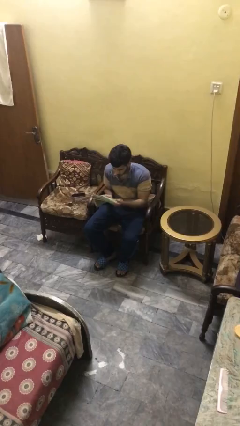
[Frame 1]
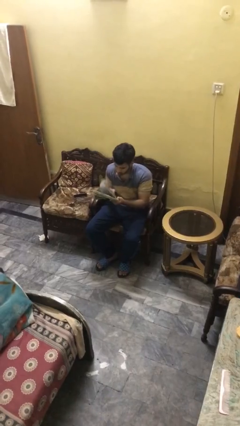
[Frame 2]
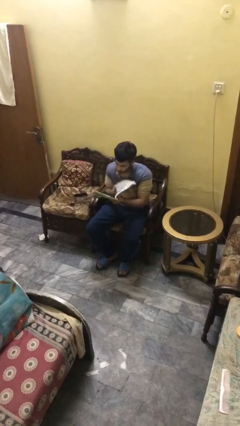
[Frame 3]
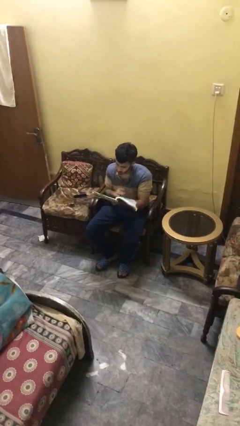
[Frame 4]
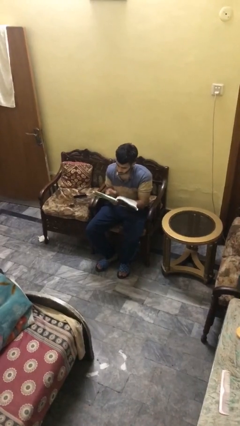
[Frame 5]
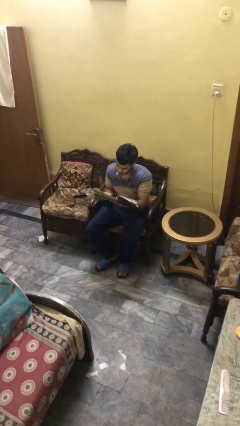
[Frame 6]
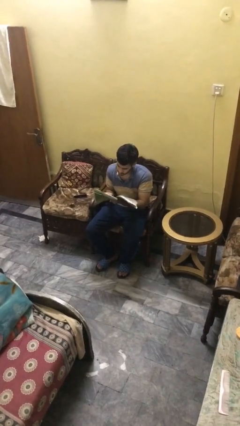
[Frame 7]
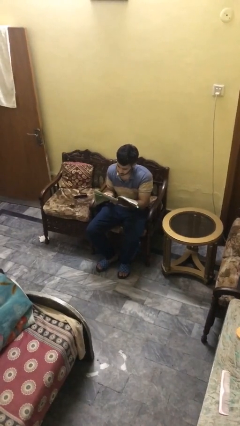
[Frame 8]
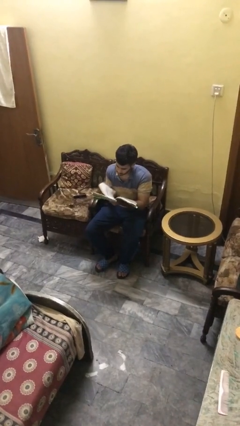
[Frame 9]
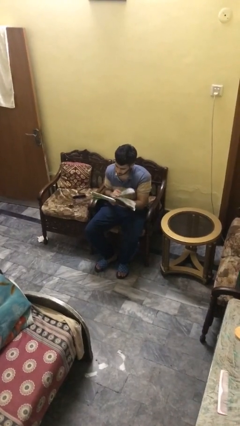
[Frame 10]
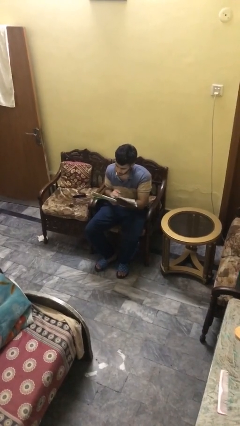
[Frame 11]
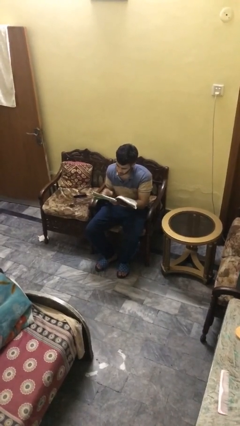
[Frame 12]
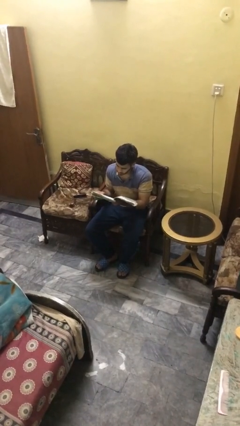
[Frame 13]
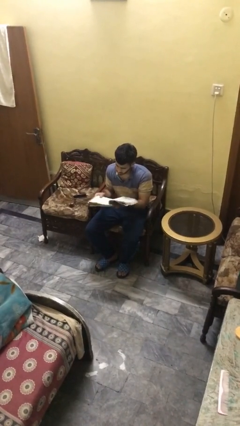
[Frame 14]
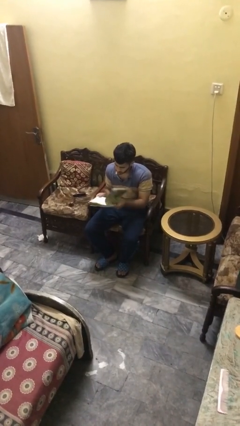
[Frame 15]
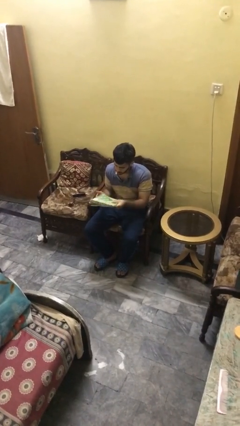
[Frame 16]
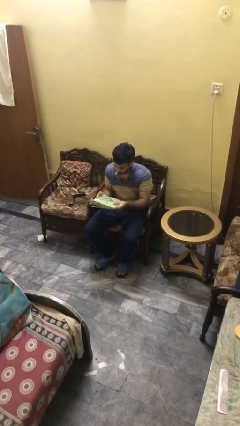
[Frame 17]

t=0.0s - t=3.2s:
person reads document

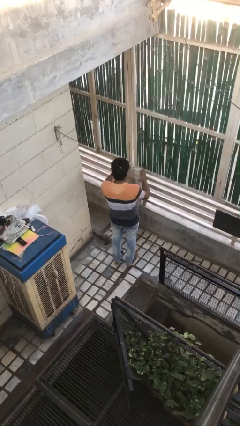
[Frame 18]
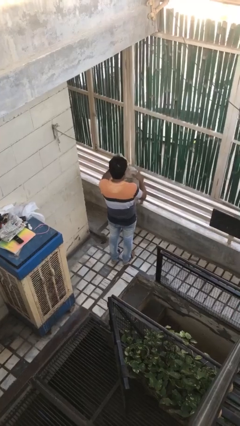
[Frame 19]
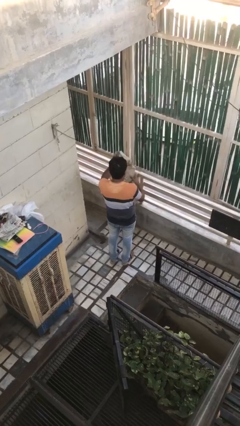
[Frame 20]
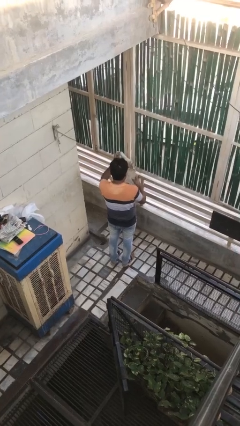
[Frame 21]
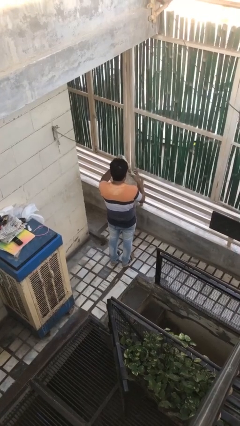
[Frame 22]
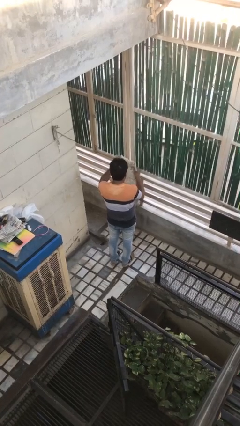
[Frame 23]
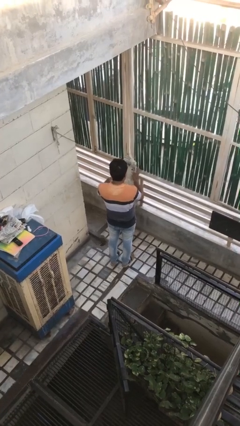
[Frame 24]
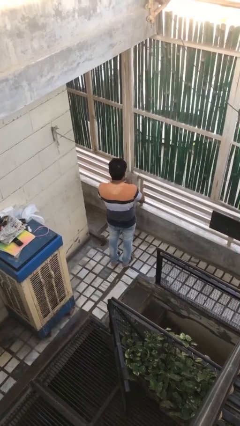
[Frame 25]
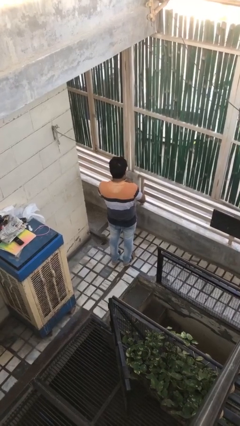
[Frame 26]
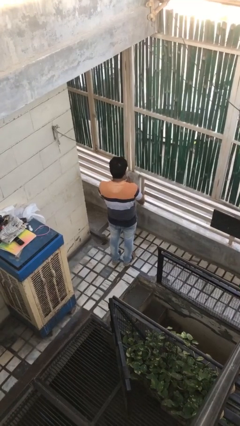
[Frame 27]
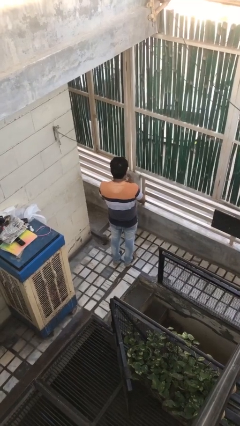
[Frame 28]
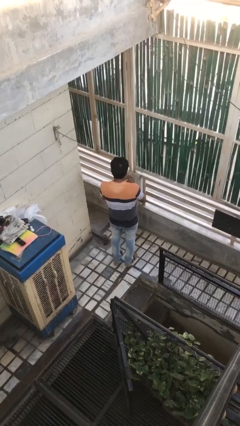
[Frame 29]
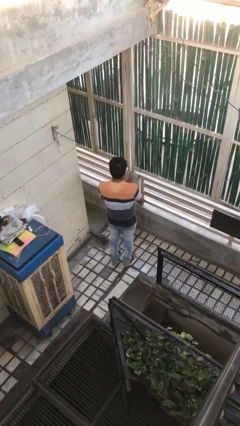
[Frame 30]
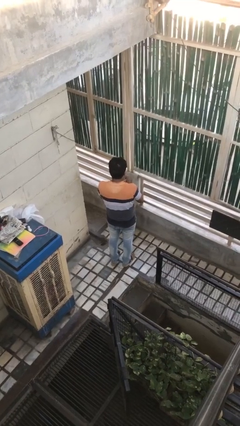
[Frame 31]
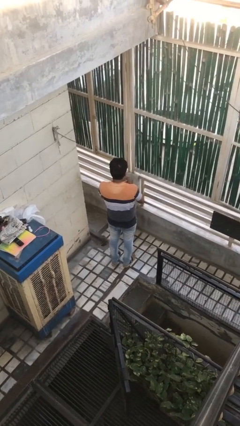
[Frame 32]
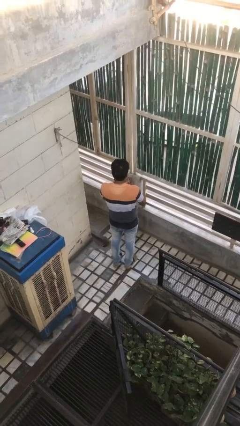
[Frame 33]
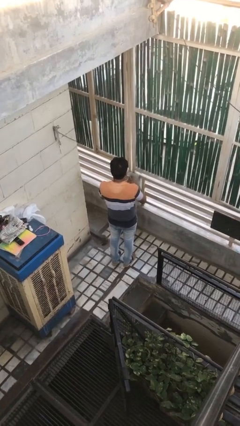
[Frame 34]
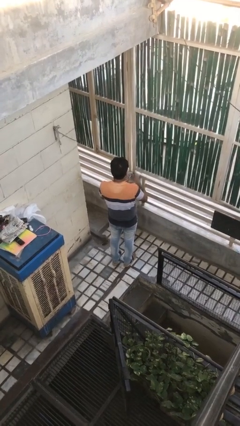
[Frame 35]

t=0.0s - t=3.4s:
person crumples paper

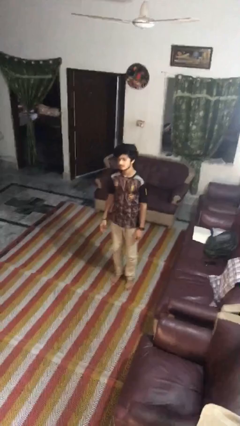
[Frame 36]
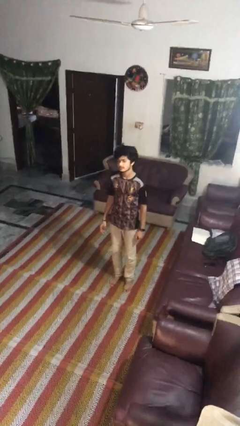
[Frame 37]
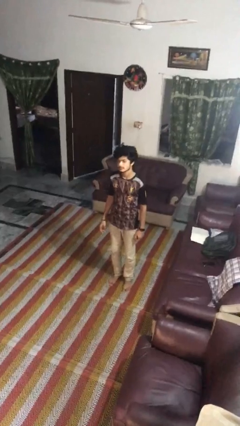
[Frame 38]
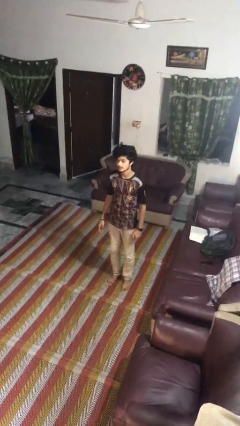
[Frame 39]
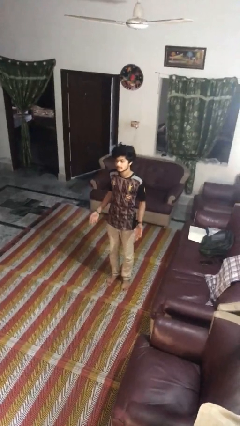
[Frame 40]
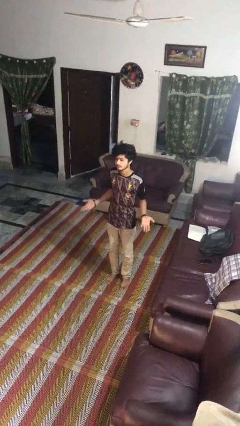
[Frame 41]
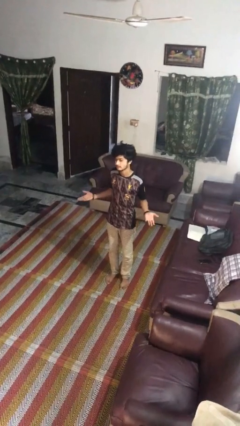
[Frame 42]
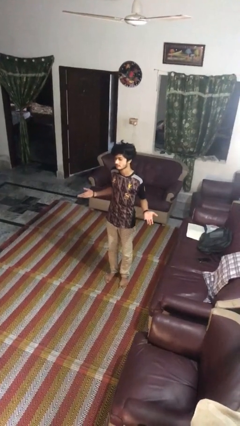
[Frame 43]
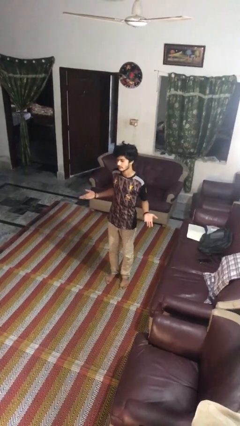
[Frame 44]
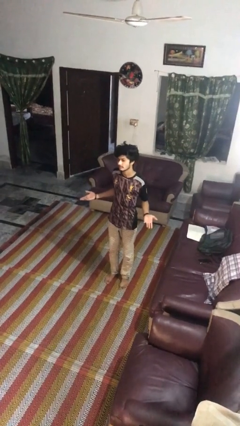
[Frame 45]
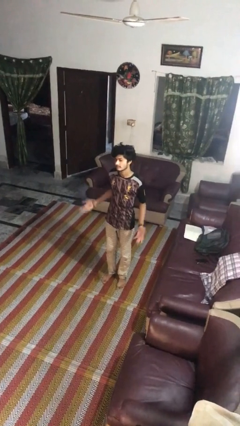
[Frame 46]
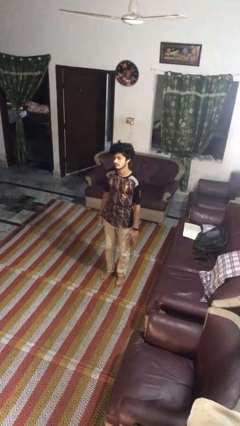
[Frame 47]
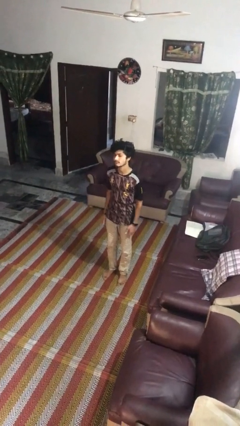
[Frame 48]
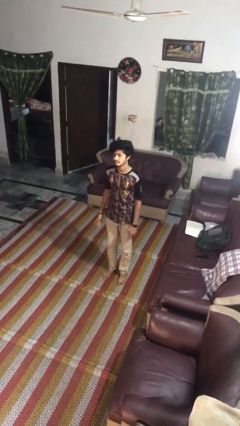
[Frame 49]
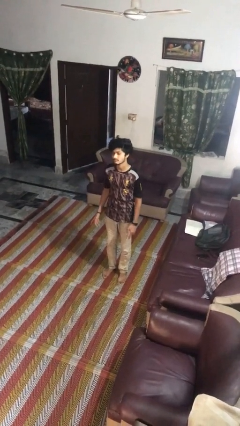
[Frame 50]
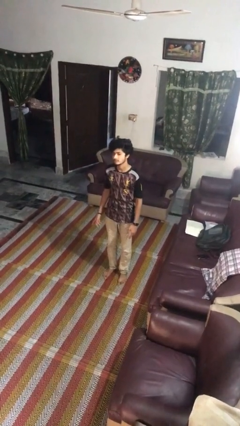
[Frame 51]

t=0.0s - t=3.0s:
person shrugs

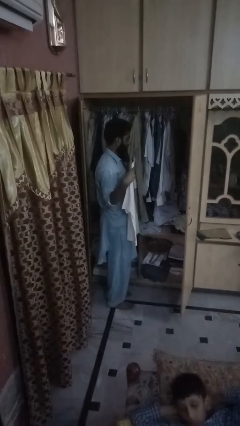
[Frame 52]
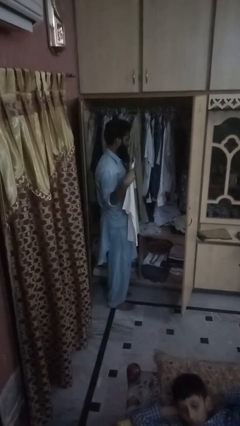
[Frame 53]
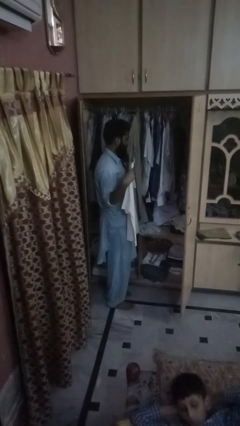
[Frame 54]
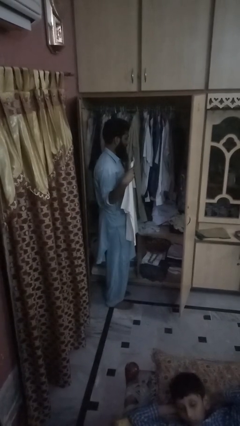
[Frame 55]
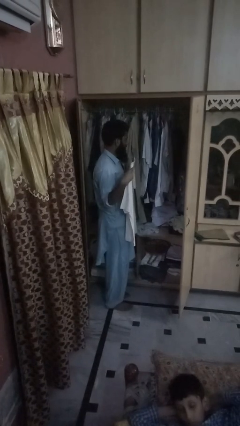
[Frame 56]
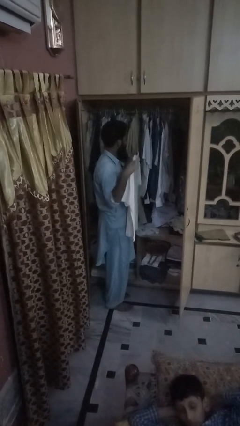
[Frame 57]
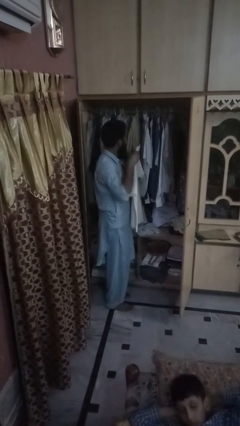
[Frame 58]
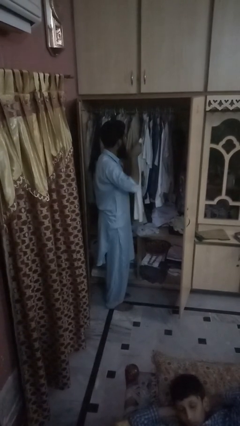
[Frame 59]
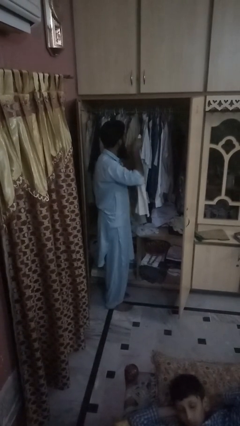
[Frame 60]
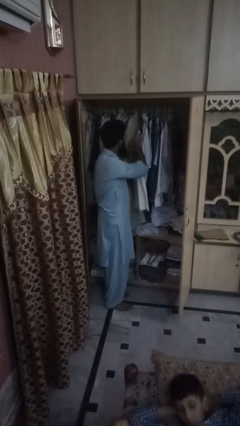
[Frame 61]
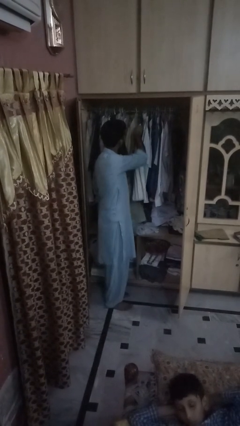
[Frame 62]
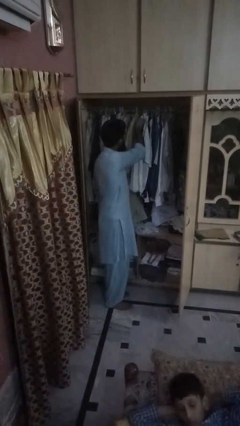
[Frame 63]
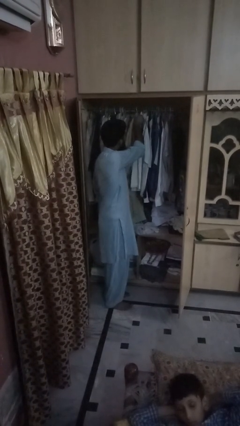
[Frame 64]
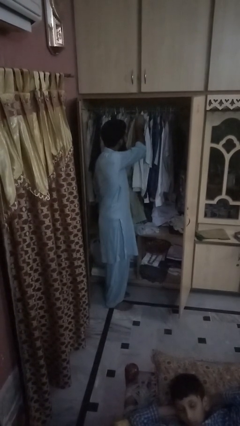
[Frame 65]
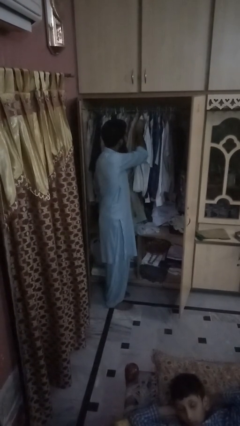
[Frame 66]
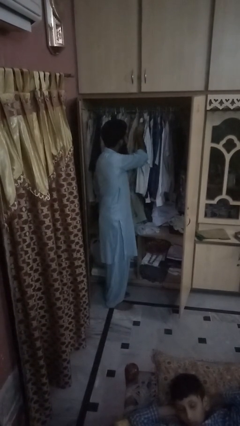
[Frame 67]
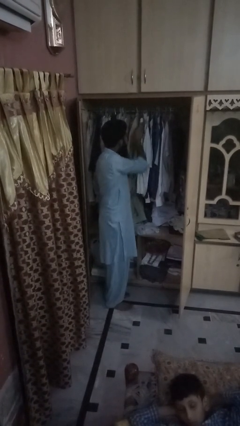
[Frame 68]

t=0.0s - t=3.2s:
person takes clothes from closet

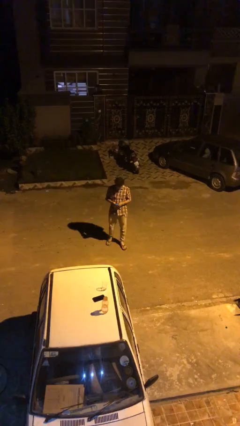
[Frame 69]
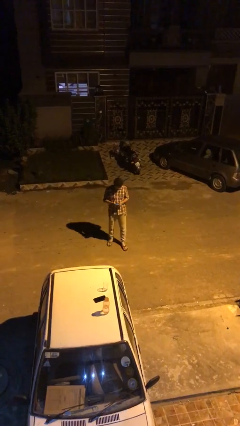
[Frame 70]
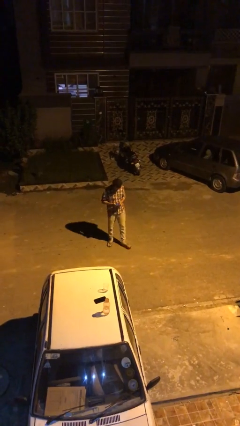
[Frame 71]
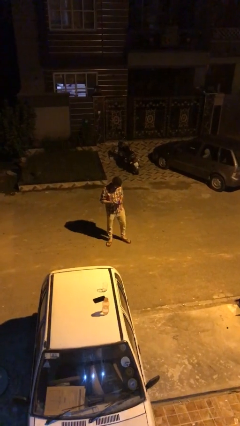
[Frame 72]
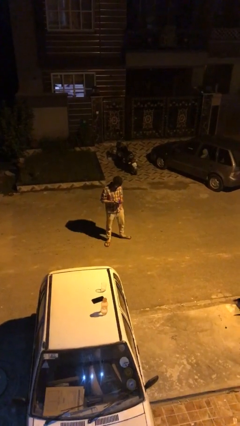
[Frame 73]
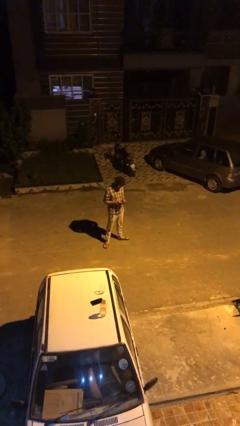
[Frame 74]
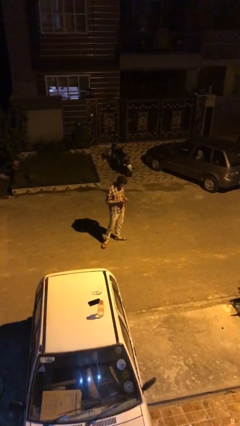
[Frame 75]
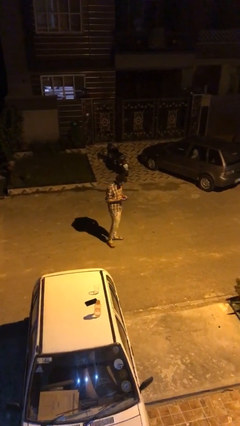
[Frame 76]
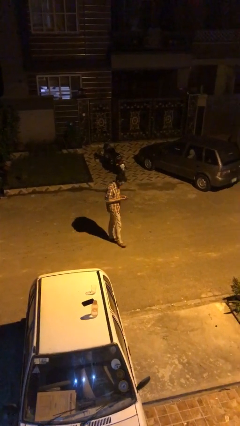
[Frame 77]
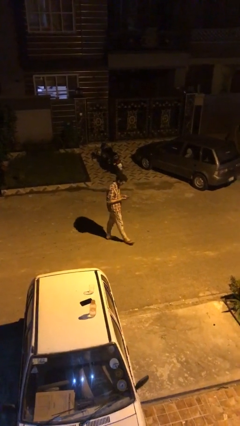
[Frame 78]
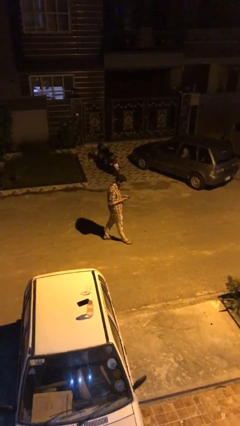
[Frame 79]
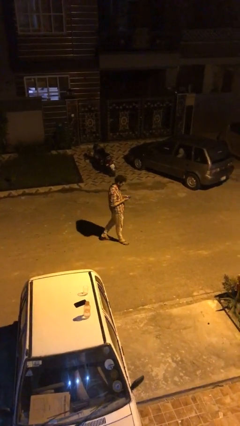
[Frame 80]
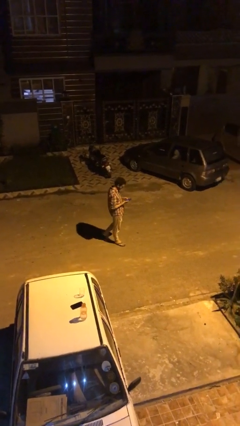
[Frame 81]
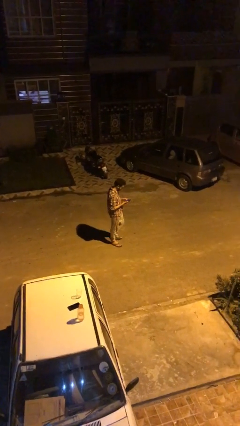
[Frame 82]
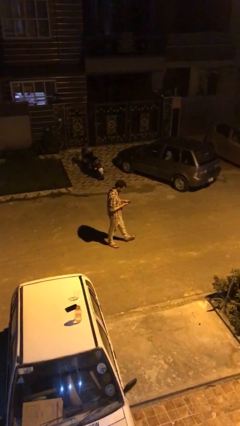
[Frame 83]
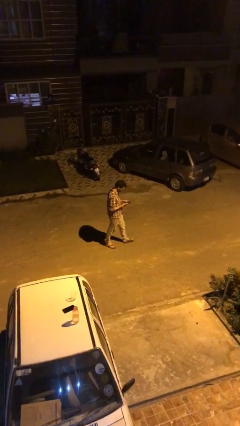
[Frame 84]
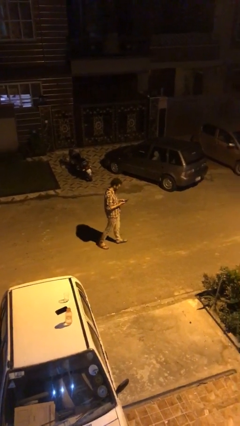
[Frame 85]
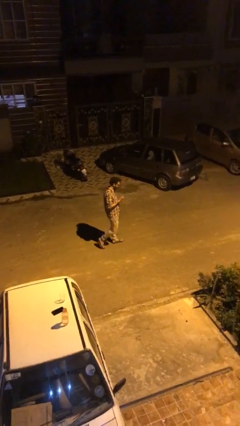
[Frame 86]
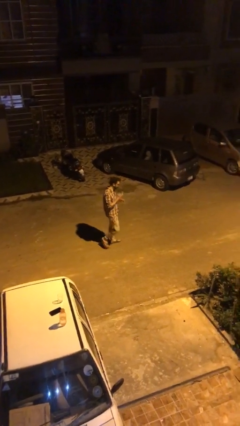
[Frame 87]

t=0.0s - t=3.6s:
person texts on phone

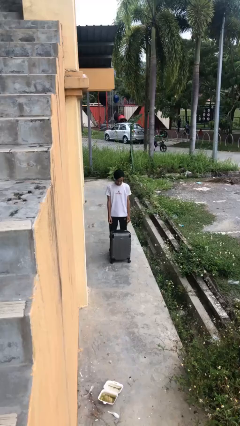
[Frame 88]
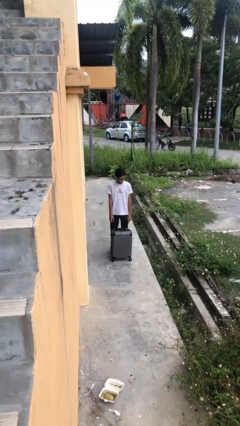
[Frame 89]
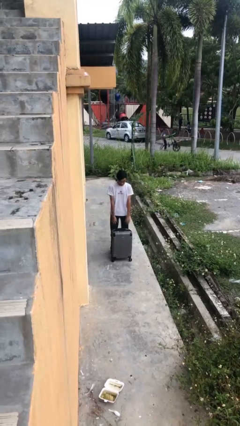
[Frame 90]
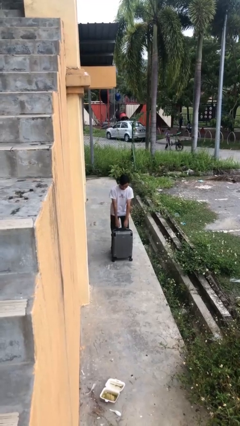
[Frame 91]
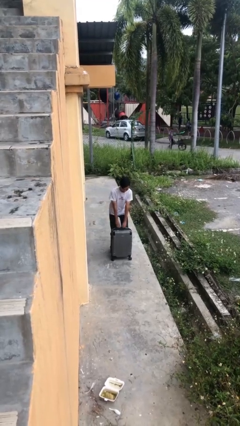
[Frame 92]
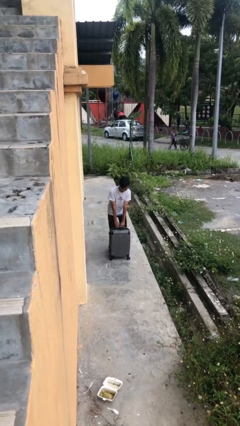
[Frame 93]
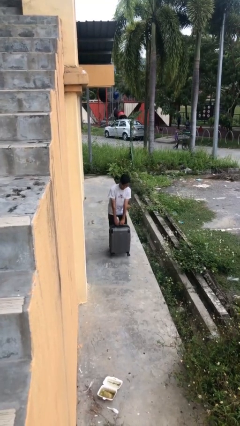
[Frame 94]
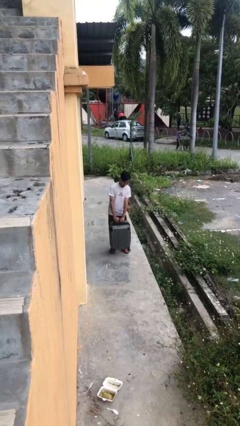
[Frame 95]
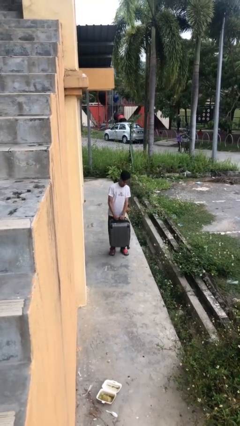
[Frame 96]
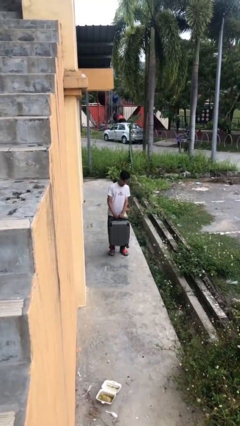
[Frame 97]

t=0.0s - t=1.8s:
person picks up object from floor
